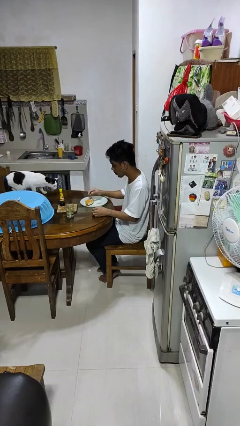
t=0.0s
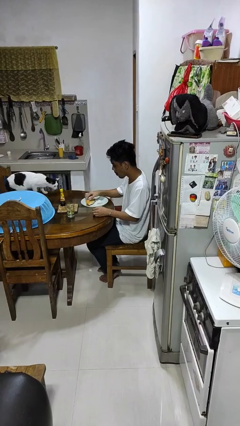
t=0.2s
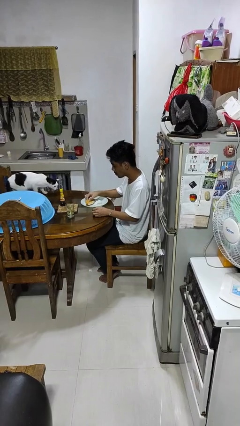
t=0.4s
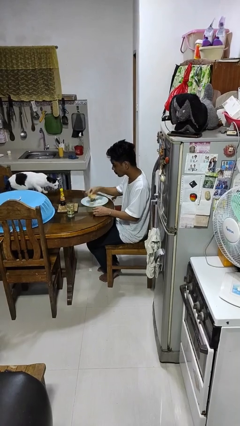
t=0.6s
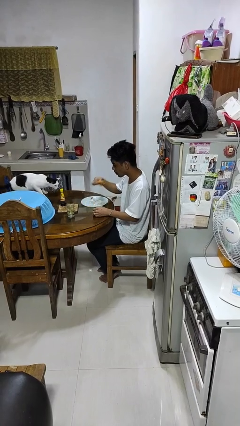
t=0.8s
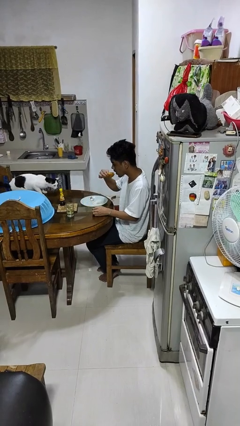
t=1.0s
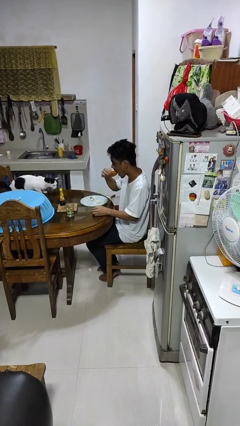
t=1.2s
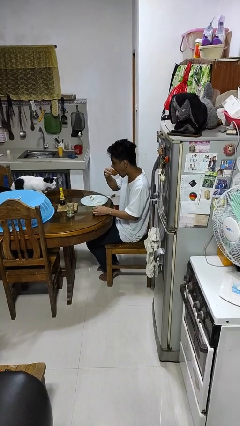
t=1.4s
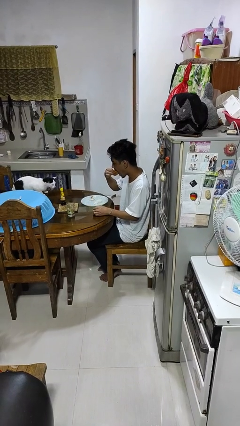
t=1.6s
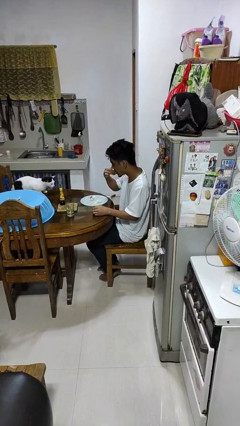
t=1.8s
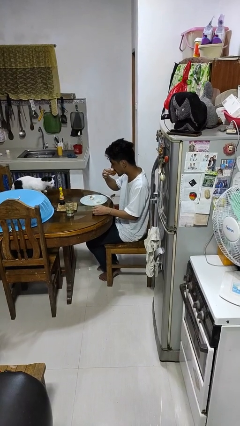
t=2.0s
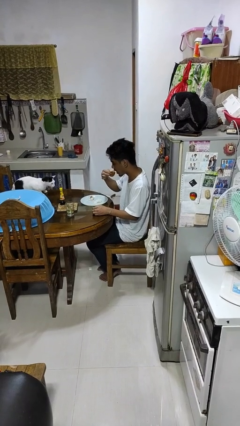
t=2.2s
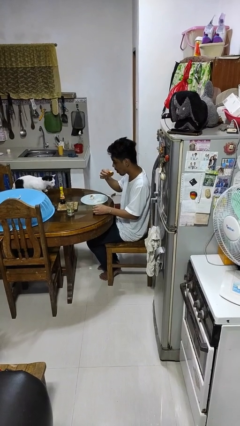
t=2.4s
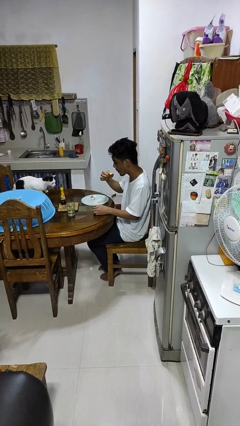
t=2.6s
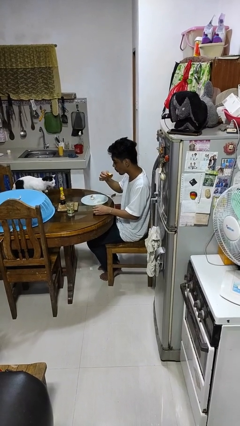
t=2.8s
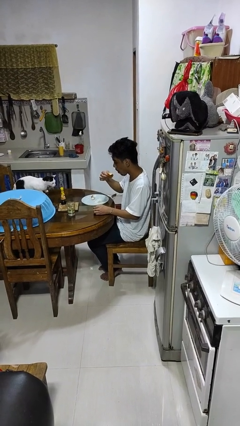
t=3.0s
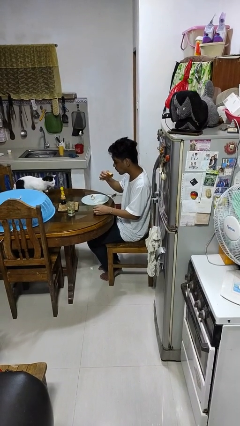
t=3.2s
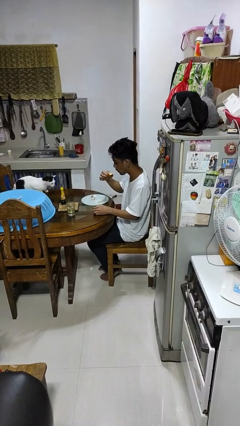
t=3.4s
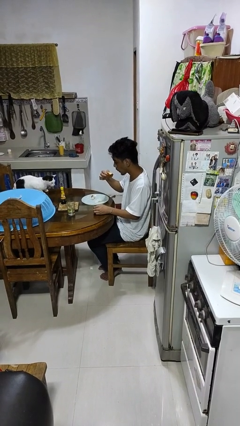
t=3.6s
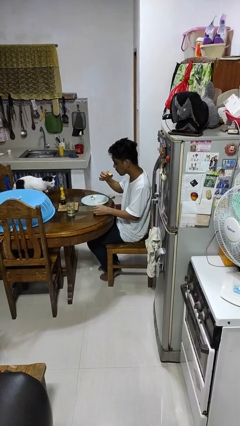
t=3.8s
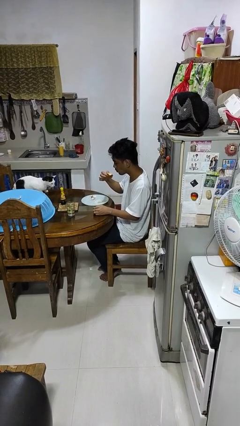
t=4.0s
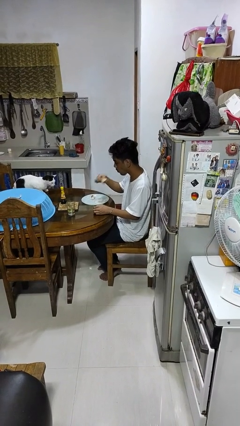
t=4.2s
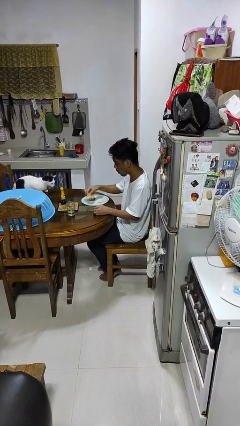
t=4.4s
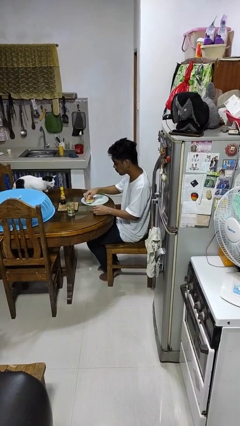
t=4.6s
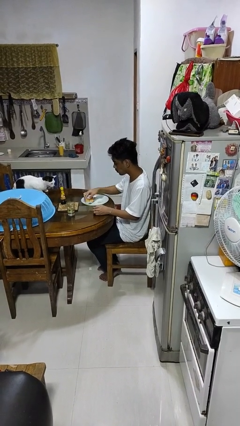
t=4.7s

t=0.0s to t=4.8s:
person eats with hands

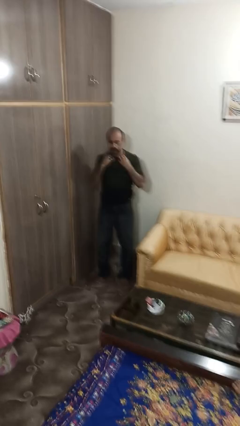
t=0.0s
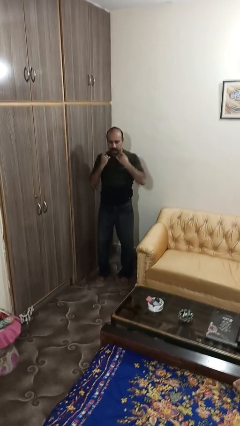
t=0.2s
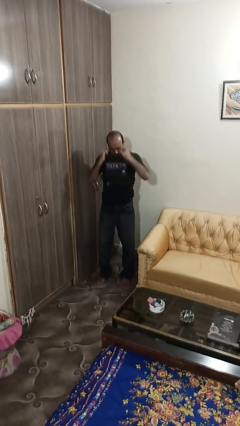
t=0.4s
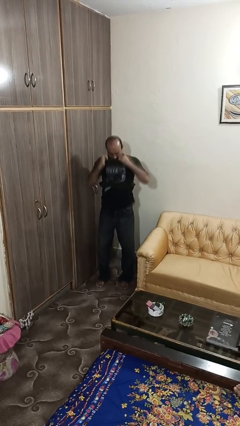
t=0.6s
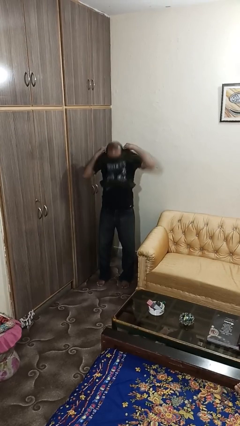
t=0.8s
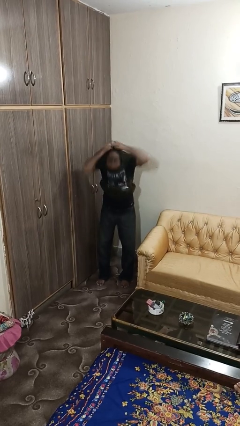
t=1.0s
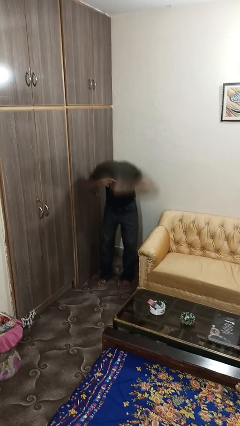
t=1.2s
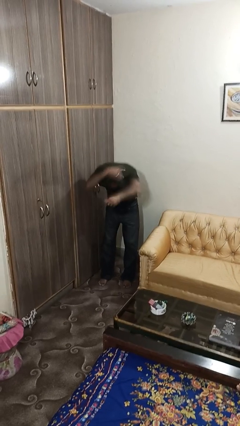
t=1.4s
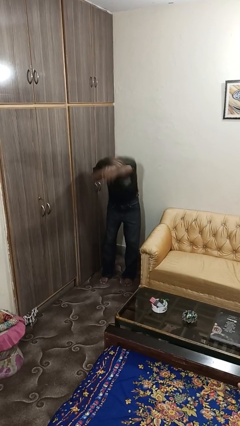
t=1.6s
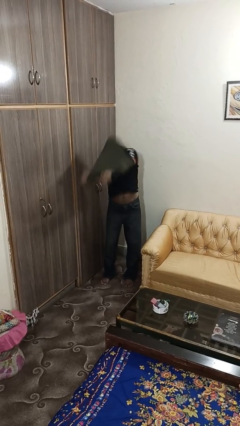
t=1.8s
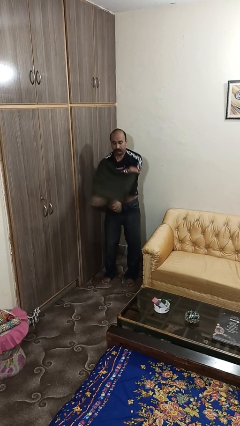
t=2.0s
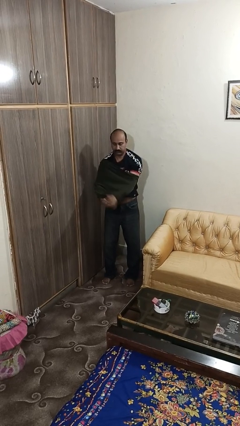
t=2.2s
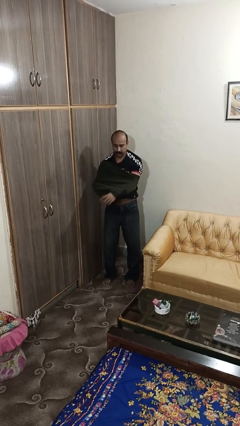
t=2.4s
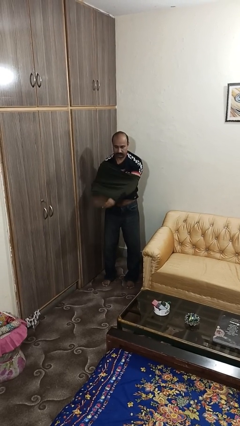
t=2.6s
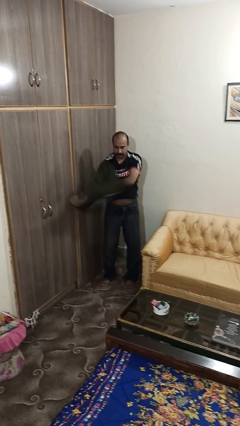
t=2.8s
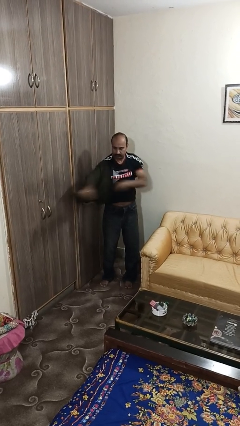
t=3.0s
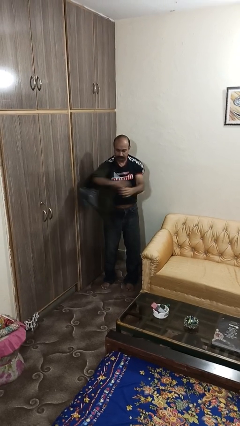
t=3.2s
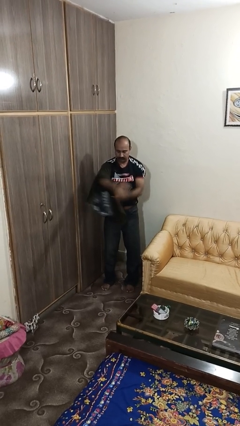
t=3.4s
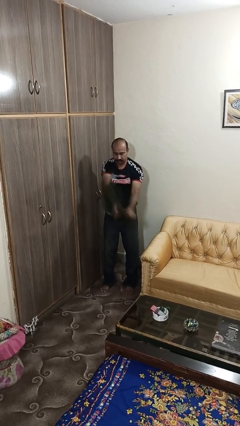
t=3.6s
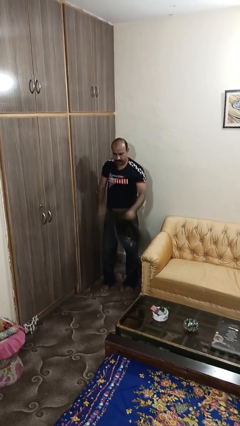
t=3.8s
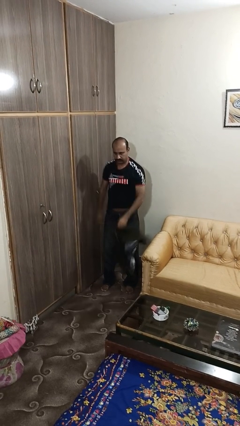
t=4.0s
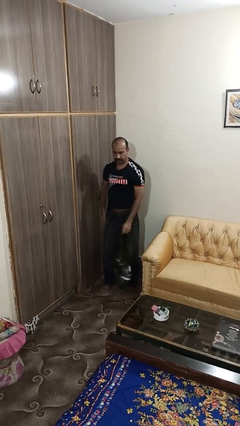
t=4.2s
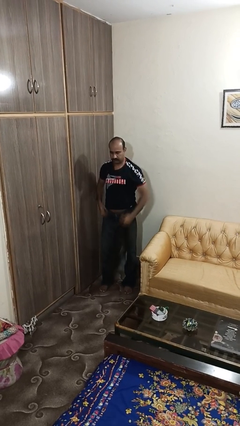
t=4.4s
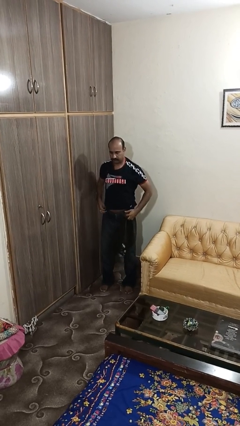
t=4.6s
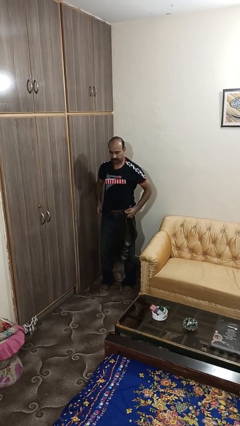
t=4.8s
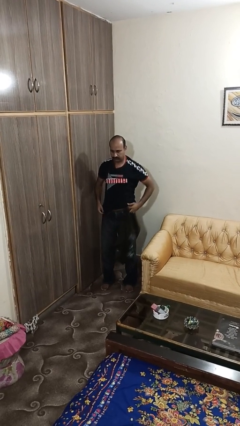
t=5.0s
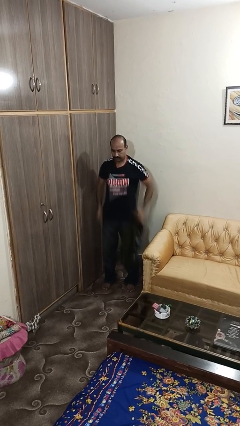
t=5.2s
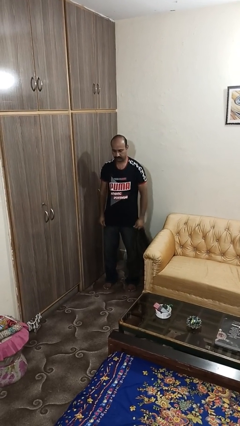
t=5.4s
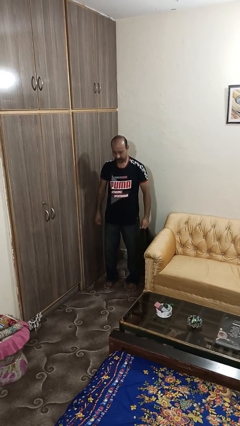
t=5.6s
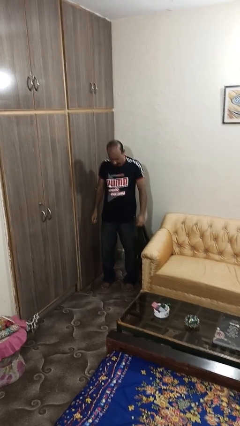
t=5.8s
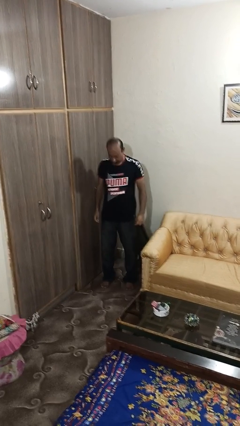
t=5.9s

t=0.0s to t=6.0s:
person takes off shirt

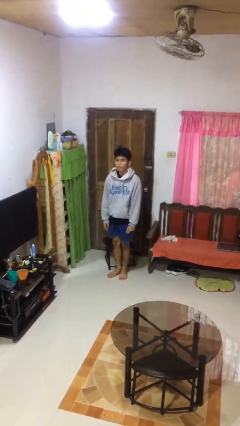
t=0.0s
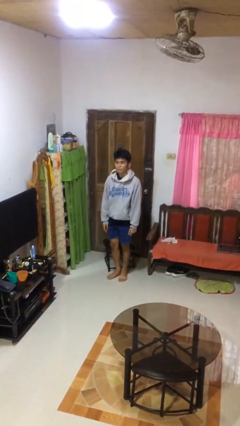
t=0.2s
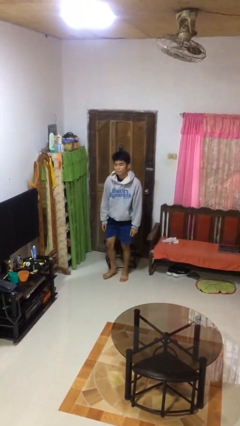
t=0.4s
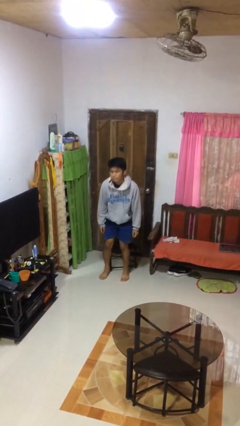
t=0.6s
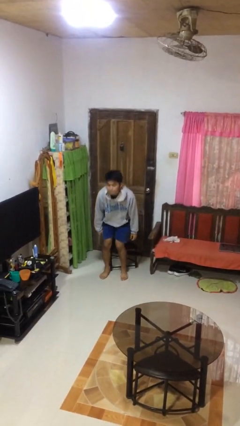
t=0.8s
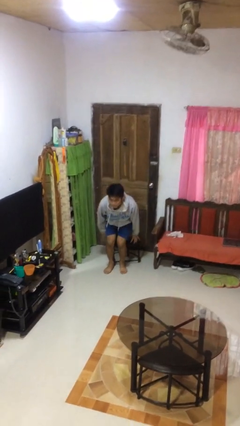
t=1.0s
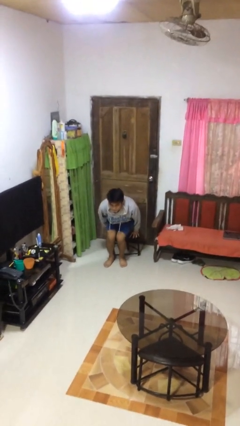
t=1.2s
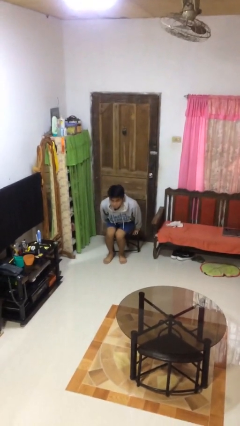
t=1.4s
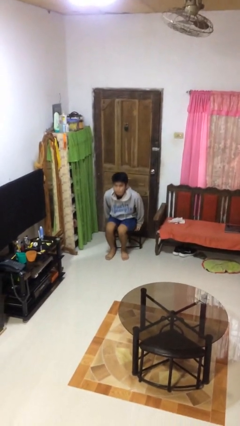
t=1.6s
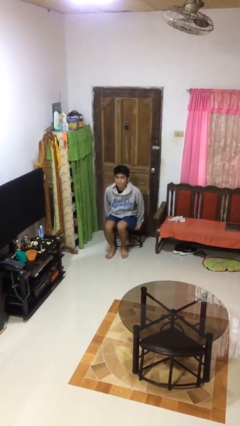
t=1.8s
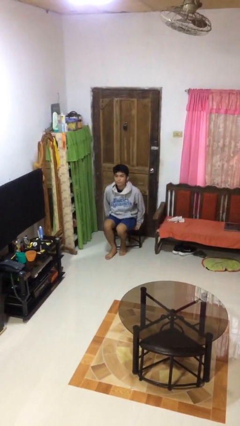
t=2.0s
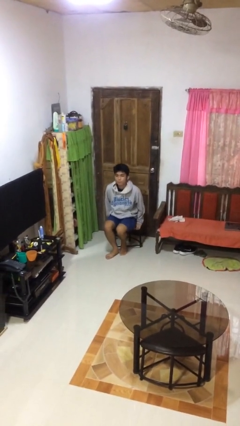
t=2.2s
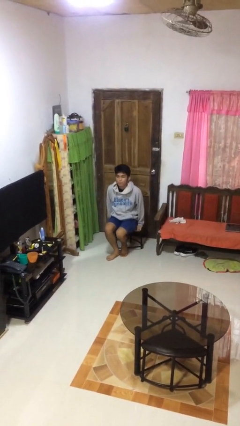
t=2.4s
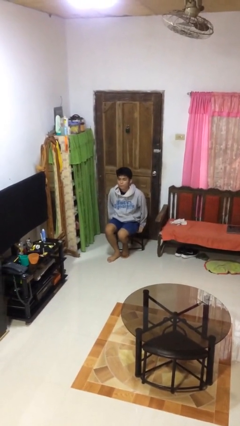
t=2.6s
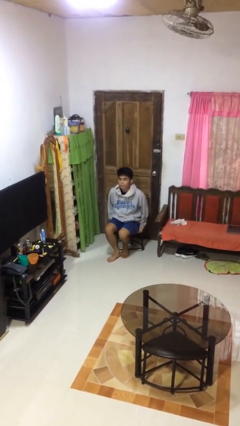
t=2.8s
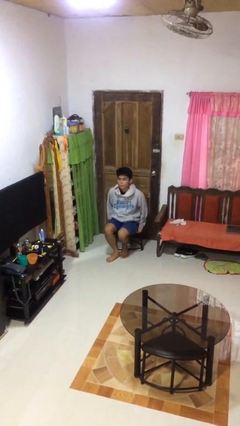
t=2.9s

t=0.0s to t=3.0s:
person sits down

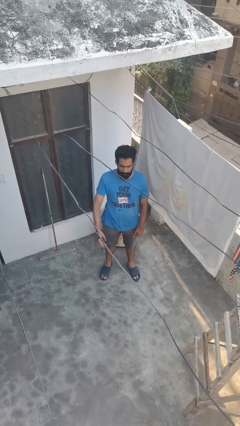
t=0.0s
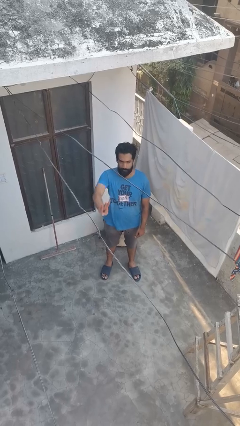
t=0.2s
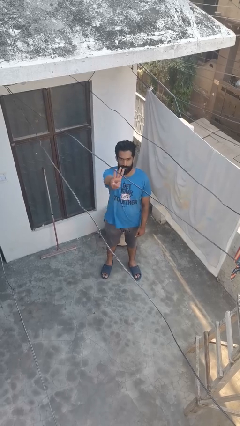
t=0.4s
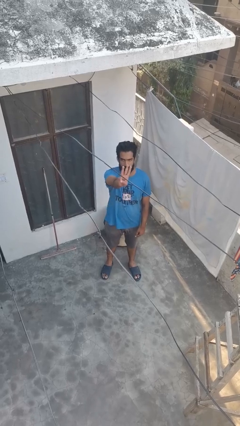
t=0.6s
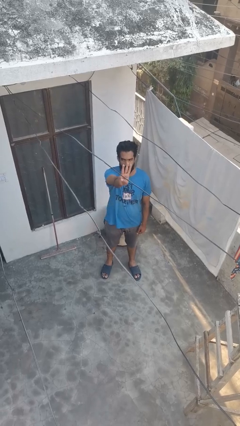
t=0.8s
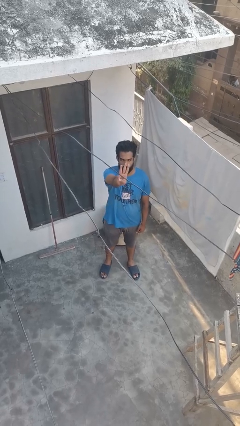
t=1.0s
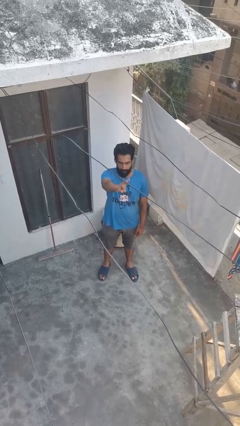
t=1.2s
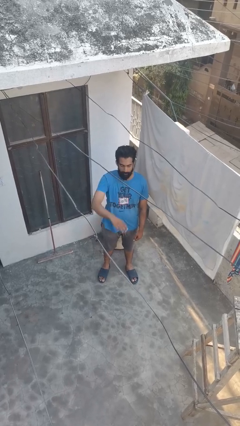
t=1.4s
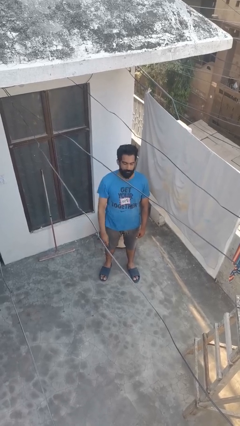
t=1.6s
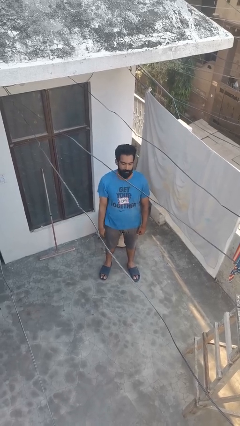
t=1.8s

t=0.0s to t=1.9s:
person gestures number three

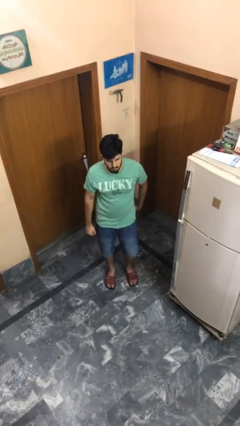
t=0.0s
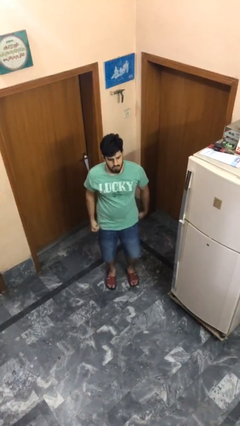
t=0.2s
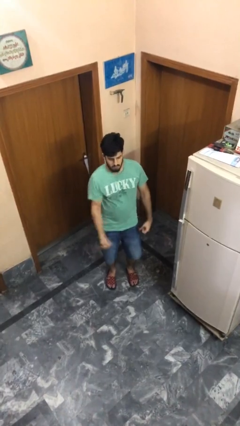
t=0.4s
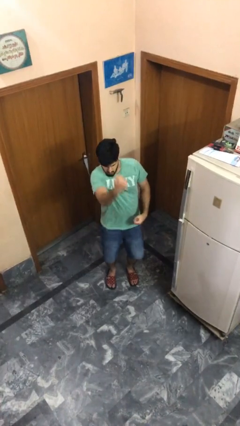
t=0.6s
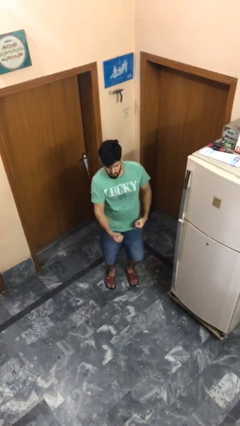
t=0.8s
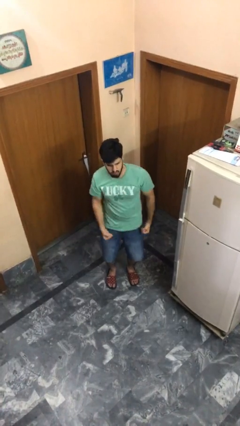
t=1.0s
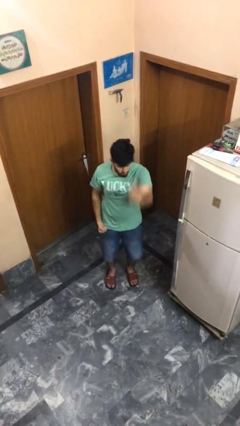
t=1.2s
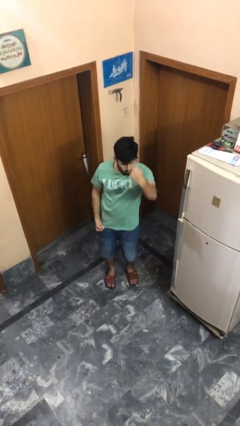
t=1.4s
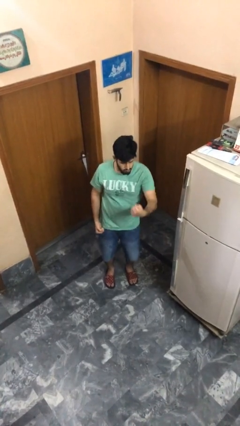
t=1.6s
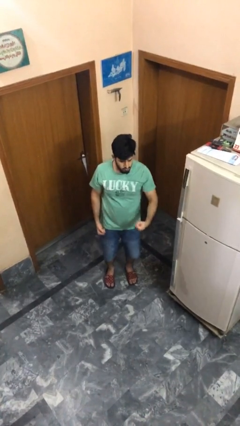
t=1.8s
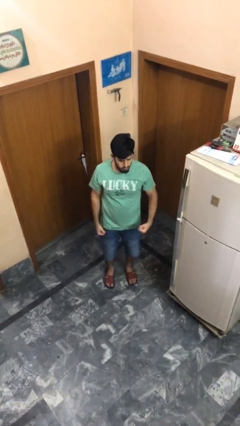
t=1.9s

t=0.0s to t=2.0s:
person punches
